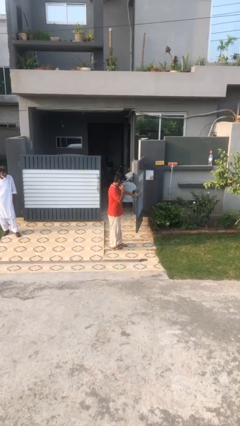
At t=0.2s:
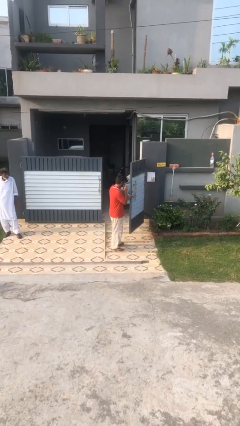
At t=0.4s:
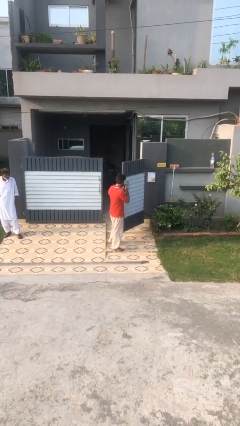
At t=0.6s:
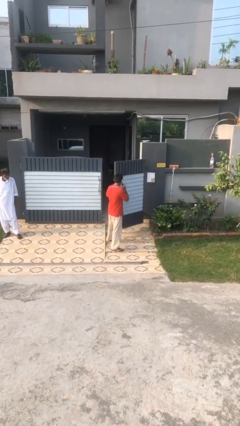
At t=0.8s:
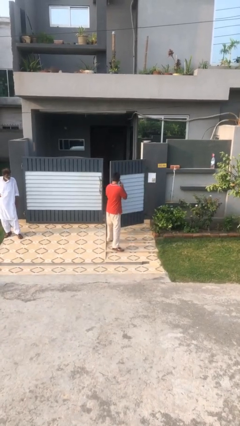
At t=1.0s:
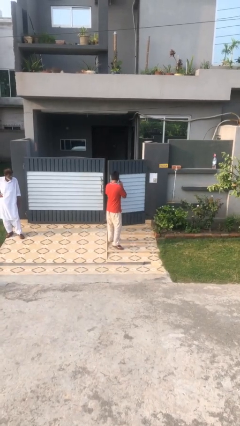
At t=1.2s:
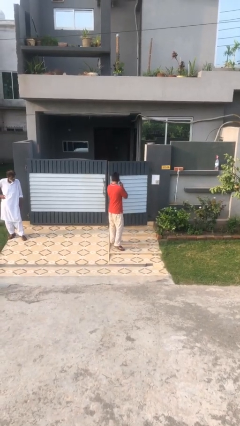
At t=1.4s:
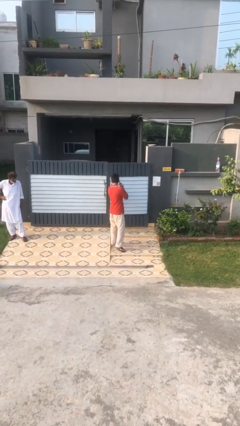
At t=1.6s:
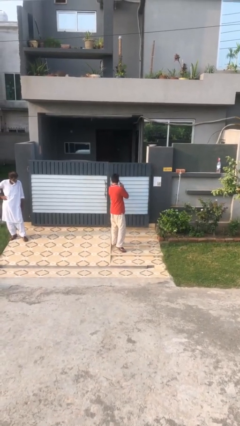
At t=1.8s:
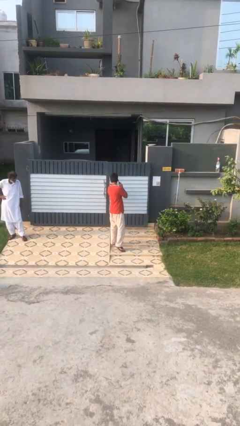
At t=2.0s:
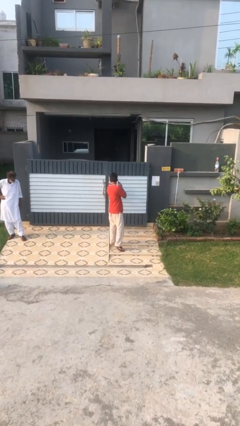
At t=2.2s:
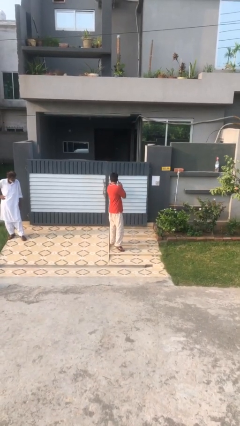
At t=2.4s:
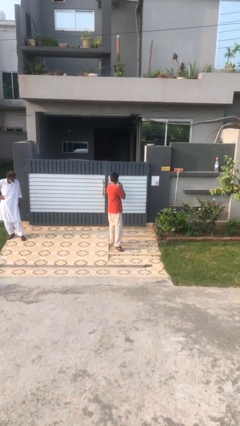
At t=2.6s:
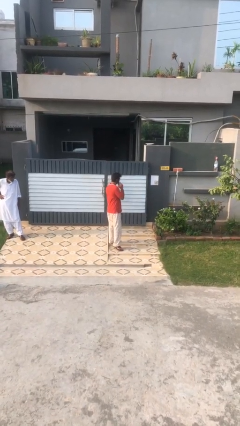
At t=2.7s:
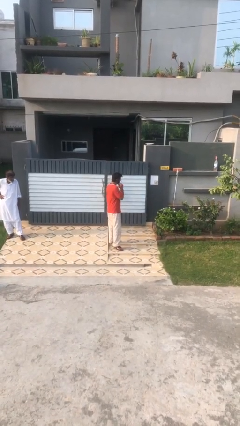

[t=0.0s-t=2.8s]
person closes facility door

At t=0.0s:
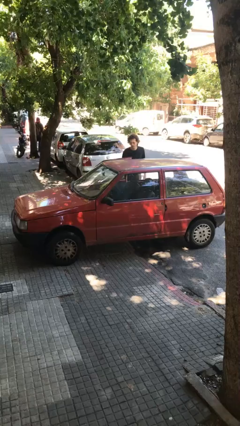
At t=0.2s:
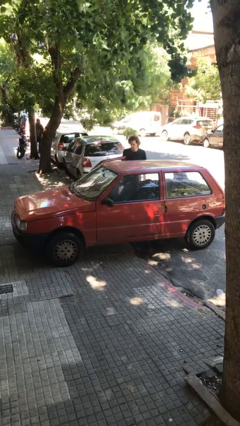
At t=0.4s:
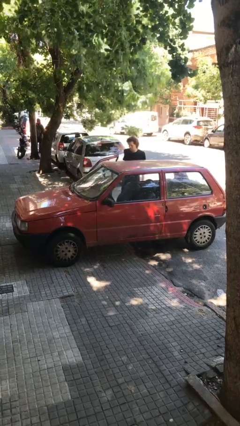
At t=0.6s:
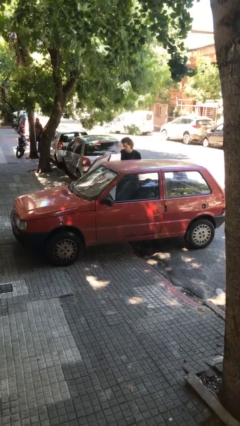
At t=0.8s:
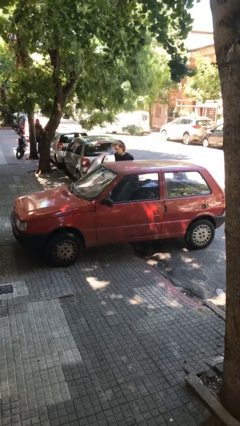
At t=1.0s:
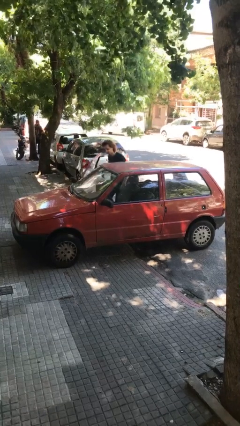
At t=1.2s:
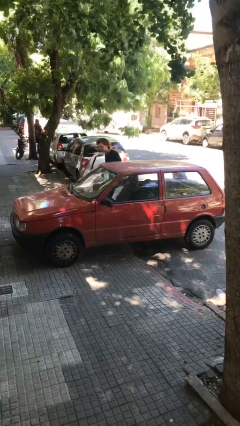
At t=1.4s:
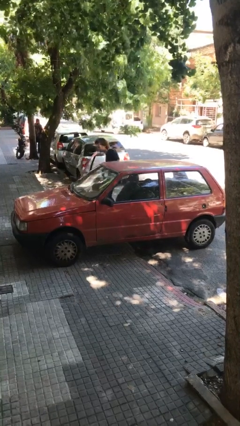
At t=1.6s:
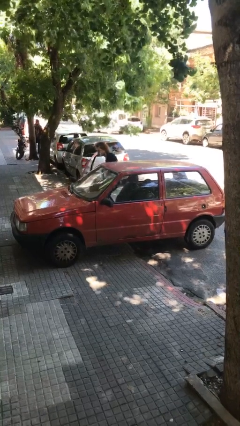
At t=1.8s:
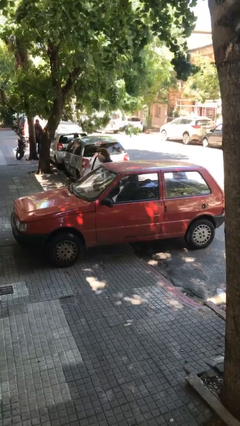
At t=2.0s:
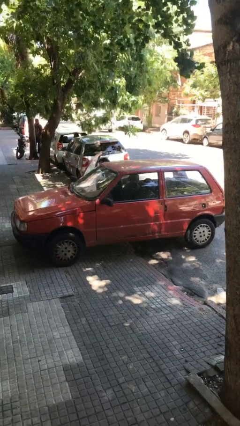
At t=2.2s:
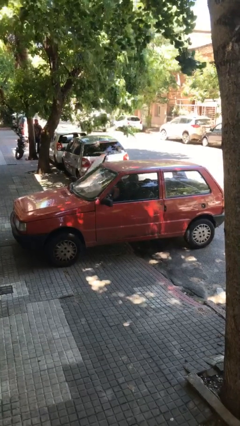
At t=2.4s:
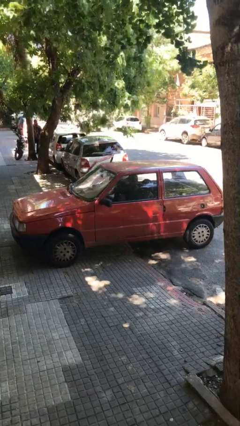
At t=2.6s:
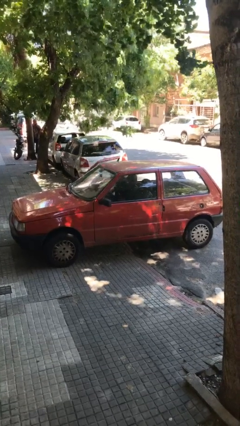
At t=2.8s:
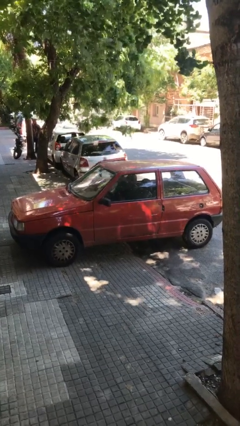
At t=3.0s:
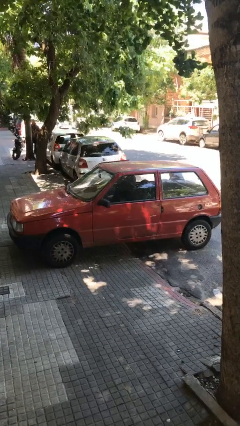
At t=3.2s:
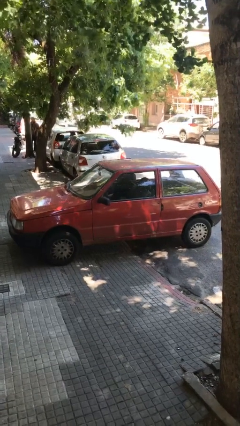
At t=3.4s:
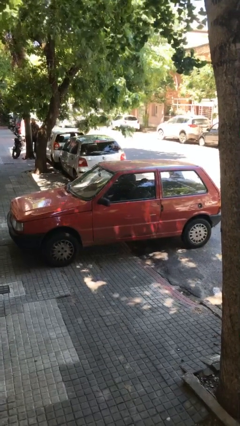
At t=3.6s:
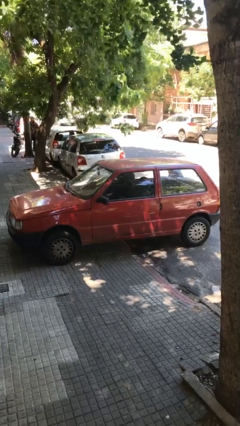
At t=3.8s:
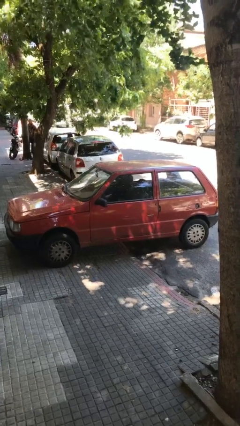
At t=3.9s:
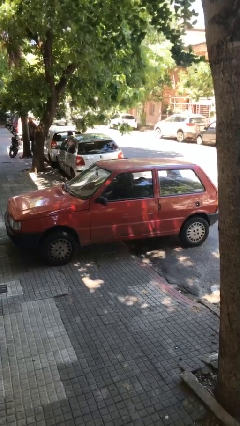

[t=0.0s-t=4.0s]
car picks up person

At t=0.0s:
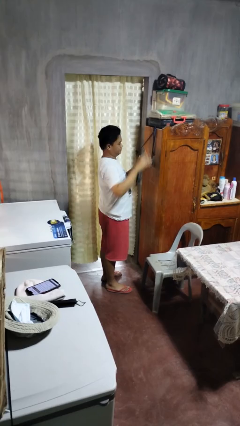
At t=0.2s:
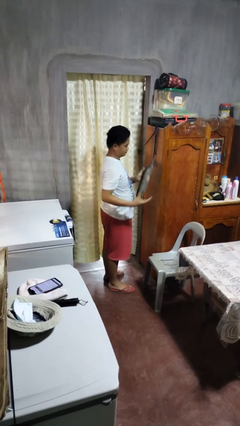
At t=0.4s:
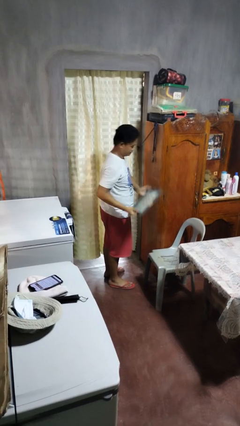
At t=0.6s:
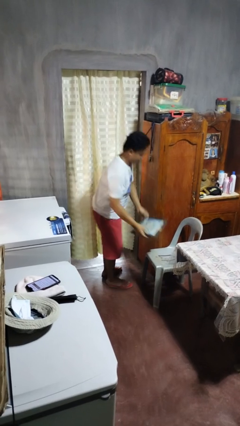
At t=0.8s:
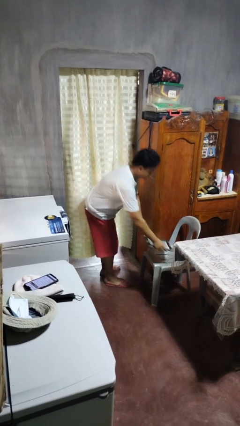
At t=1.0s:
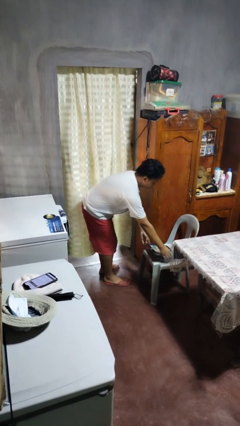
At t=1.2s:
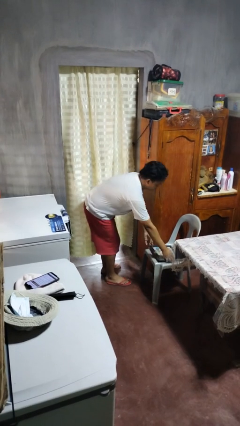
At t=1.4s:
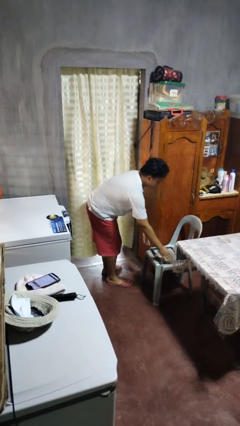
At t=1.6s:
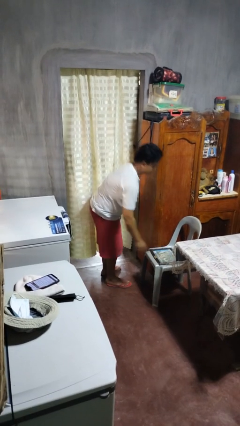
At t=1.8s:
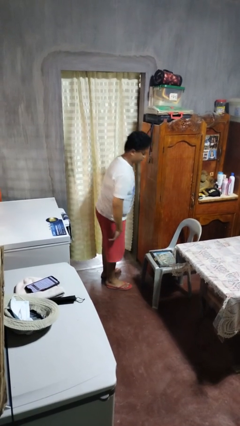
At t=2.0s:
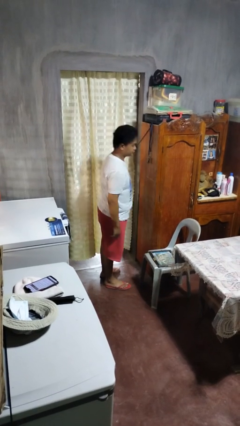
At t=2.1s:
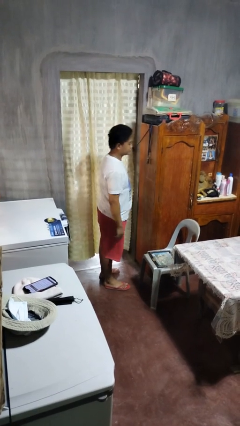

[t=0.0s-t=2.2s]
person puts down object on shelf

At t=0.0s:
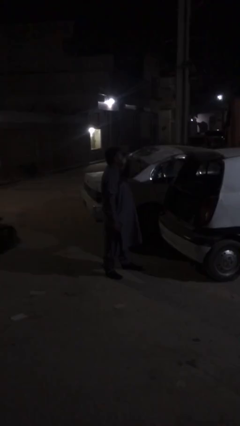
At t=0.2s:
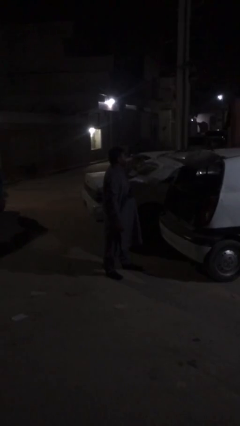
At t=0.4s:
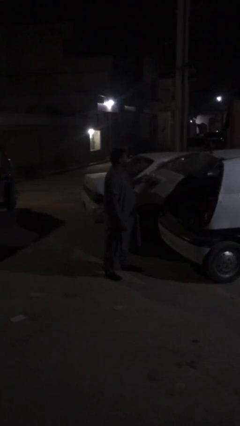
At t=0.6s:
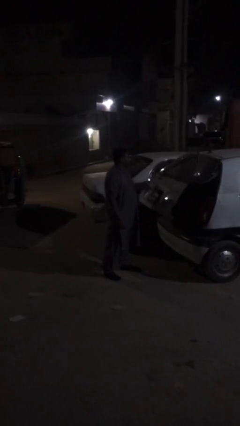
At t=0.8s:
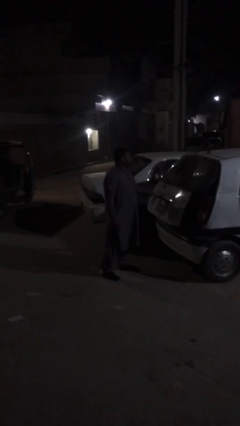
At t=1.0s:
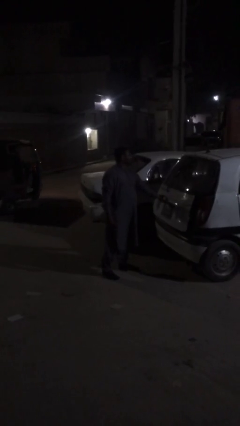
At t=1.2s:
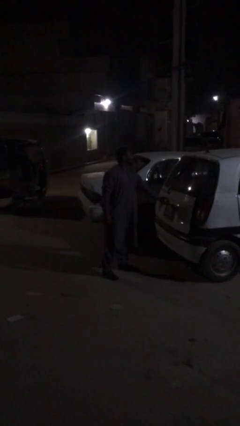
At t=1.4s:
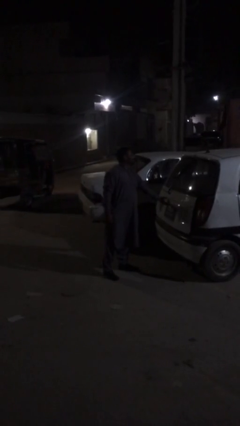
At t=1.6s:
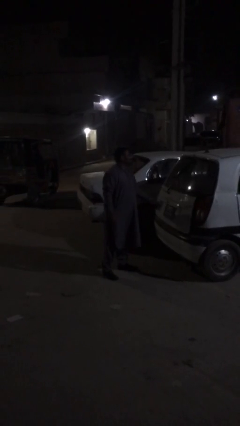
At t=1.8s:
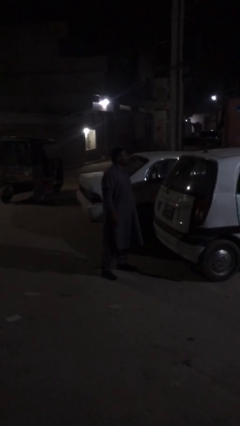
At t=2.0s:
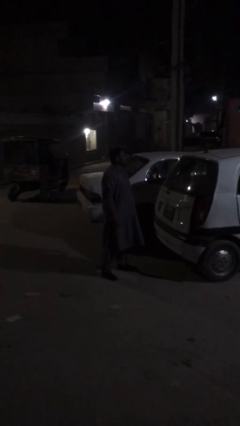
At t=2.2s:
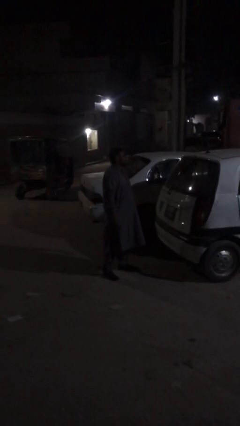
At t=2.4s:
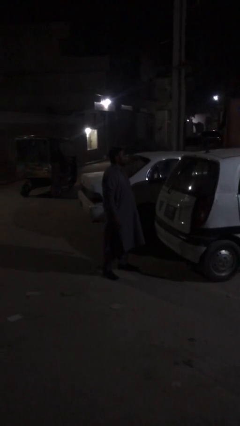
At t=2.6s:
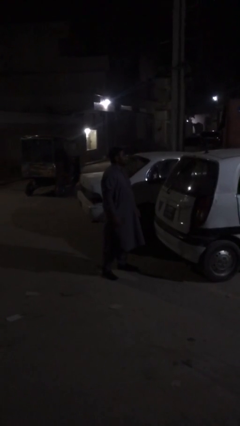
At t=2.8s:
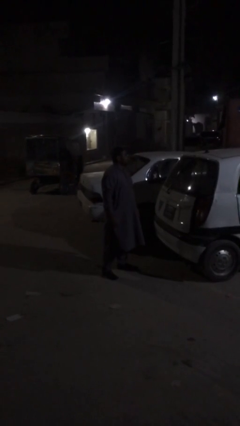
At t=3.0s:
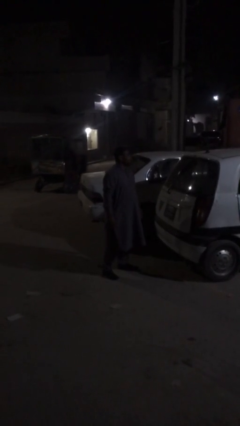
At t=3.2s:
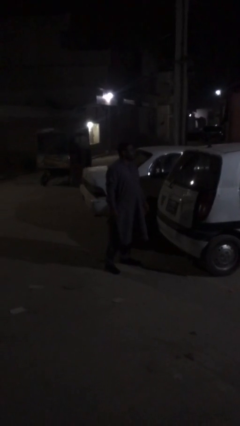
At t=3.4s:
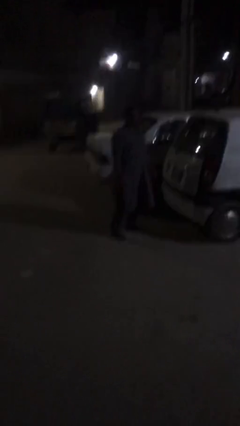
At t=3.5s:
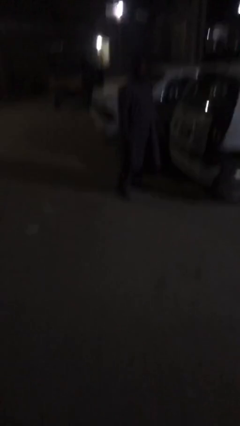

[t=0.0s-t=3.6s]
person closes car trunk

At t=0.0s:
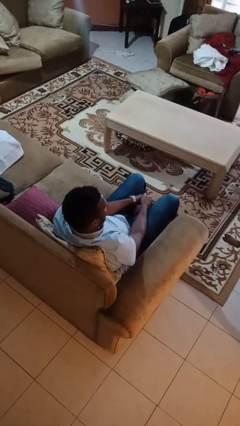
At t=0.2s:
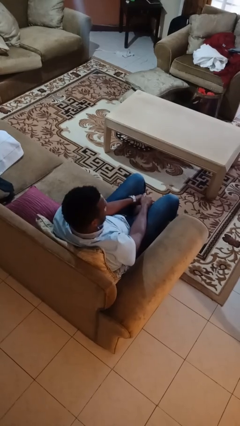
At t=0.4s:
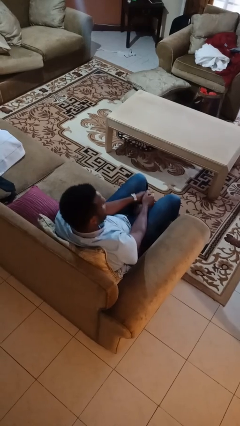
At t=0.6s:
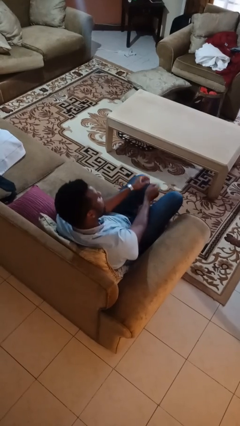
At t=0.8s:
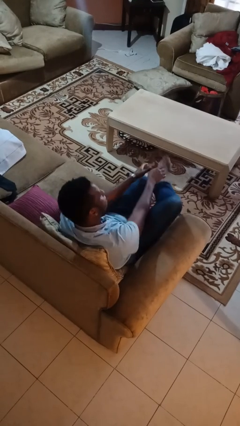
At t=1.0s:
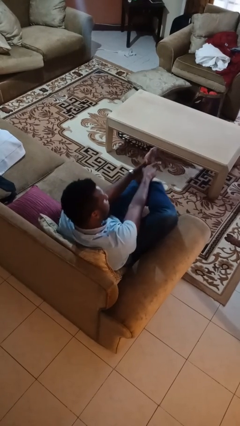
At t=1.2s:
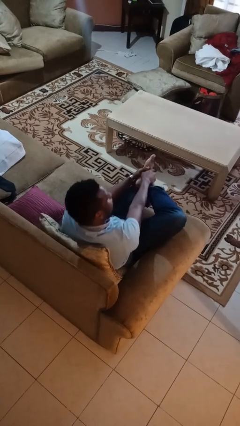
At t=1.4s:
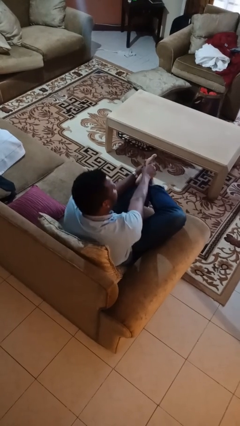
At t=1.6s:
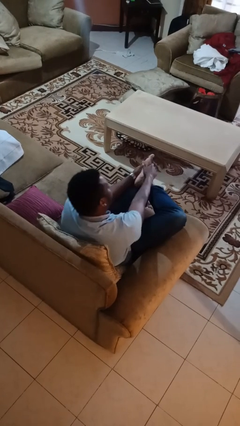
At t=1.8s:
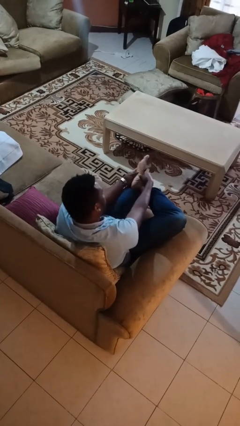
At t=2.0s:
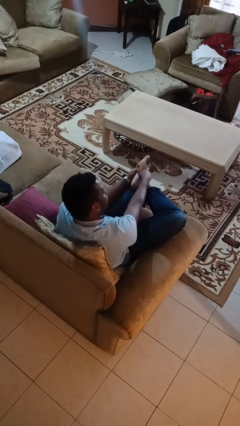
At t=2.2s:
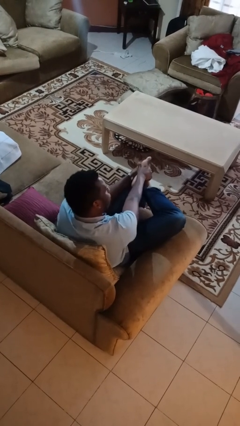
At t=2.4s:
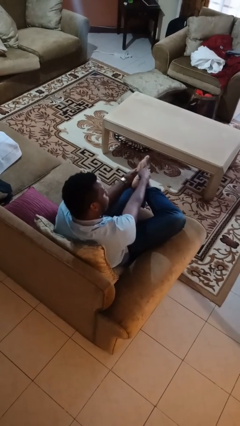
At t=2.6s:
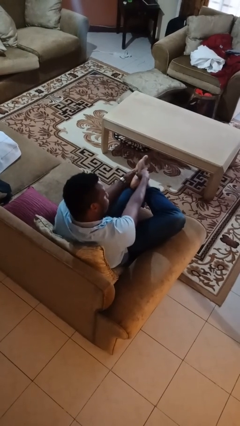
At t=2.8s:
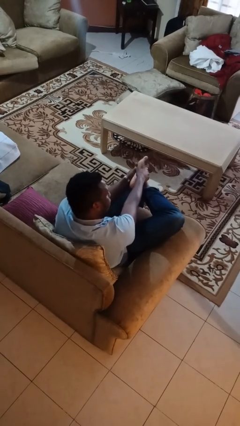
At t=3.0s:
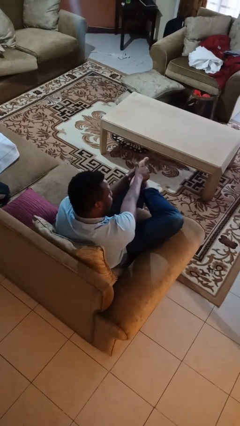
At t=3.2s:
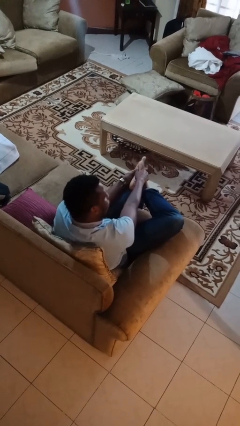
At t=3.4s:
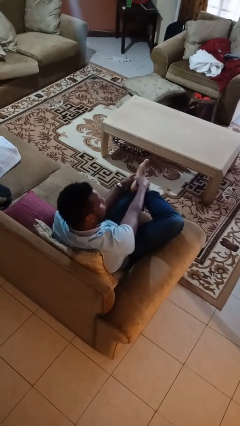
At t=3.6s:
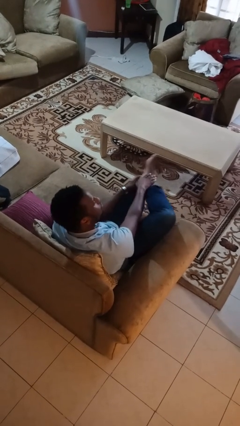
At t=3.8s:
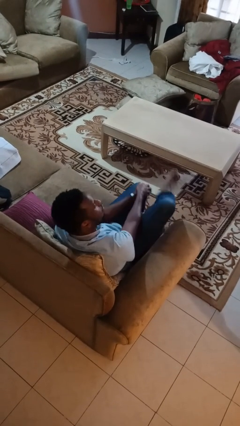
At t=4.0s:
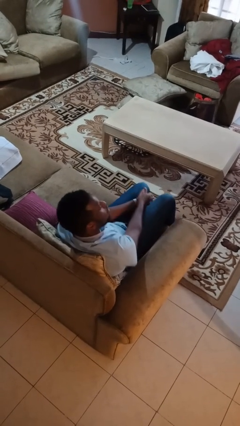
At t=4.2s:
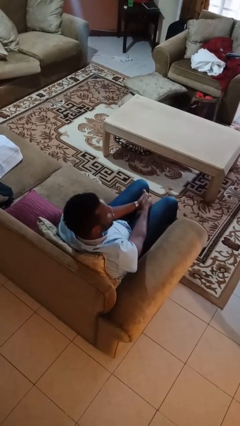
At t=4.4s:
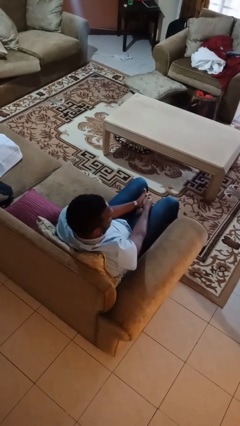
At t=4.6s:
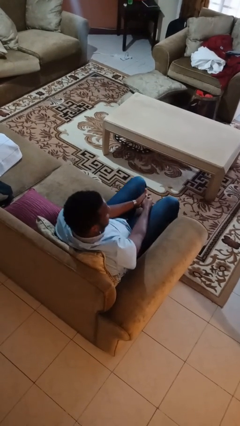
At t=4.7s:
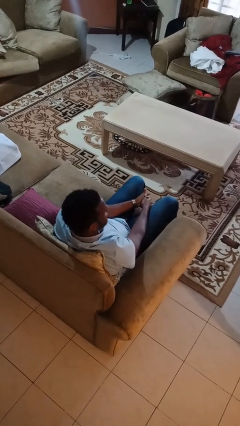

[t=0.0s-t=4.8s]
person rubs foot
